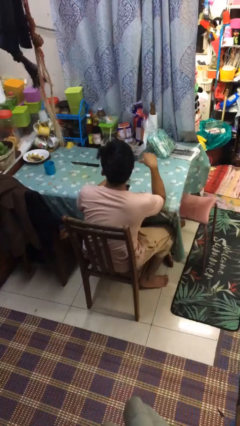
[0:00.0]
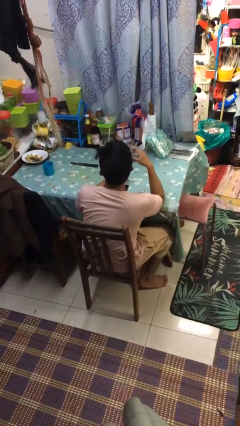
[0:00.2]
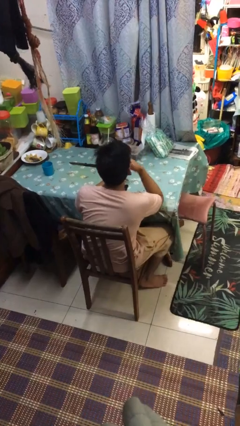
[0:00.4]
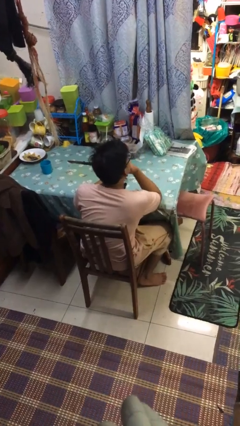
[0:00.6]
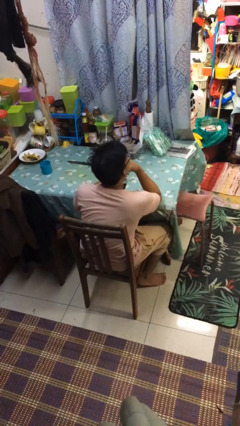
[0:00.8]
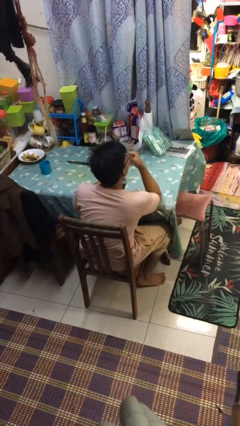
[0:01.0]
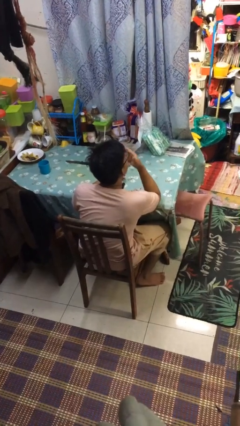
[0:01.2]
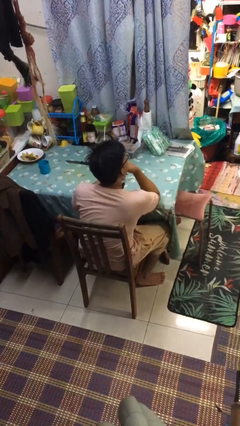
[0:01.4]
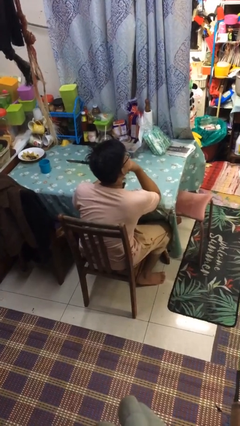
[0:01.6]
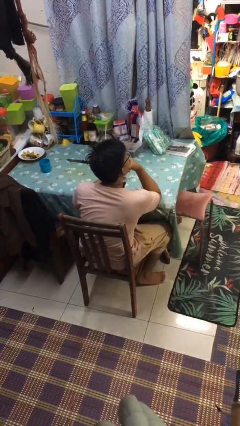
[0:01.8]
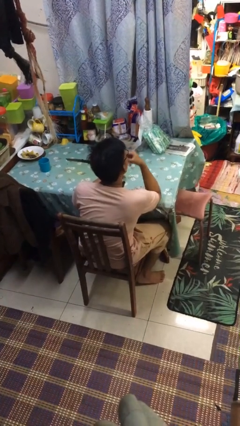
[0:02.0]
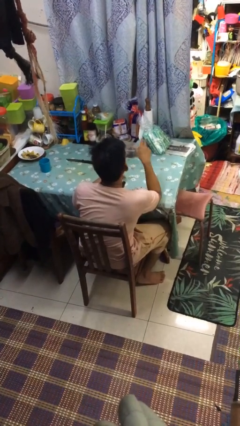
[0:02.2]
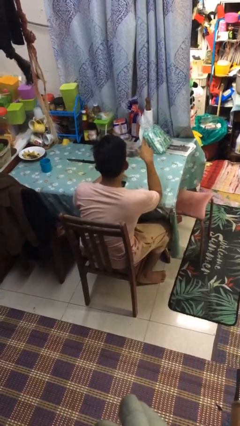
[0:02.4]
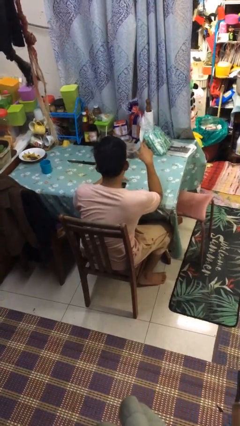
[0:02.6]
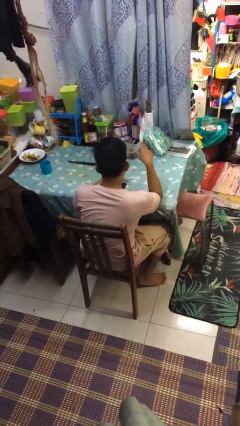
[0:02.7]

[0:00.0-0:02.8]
person strokes chin

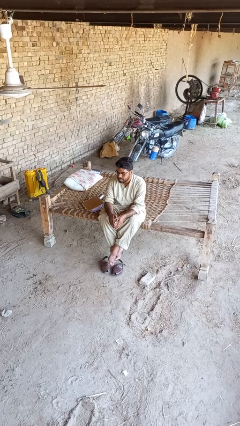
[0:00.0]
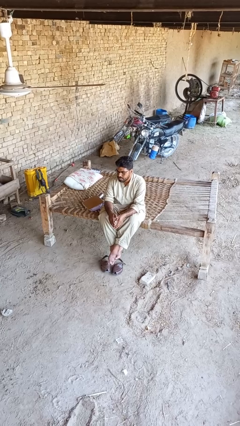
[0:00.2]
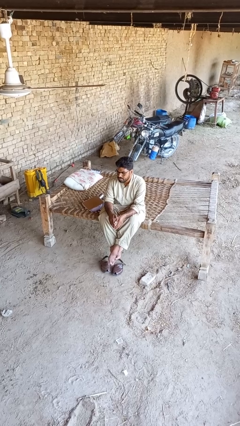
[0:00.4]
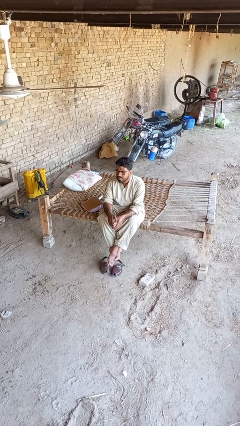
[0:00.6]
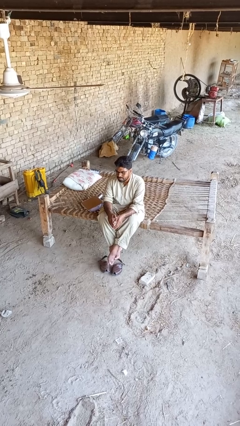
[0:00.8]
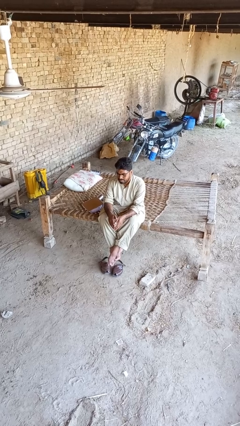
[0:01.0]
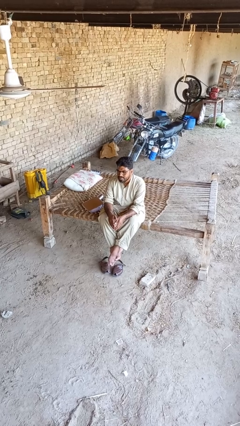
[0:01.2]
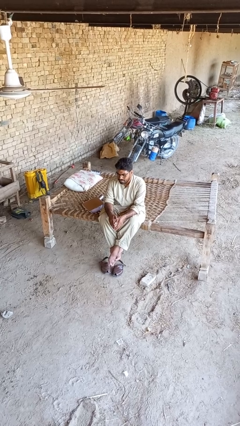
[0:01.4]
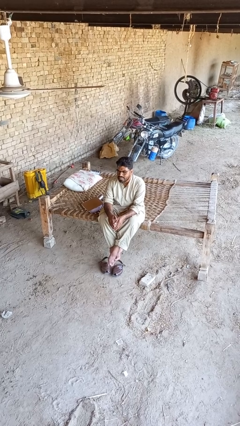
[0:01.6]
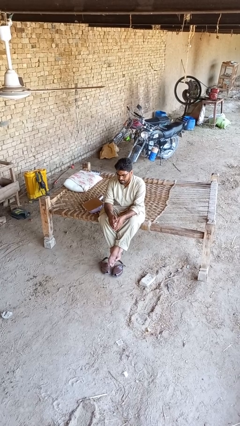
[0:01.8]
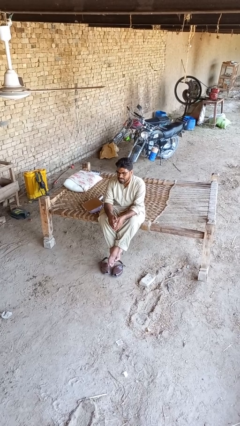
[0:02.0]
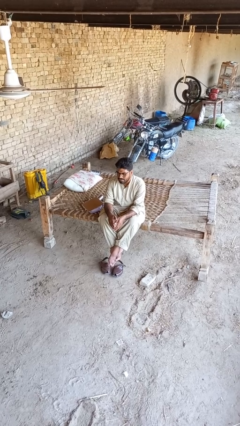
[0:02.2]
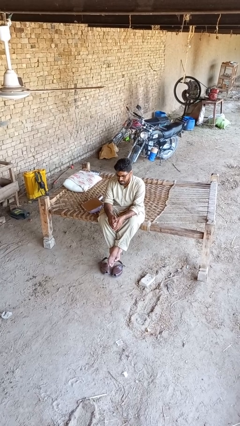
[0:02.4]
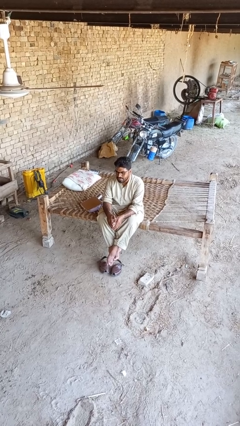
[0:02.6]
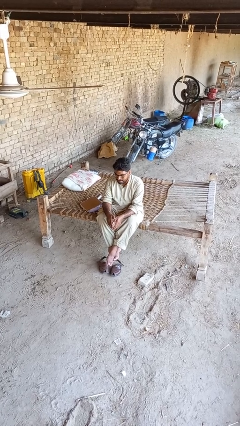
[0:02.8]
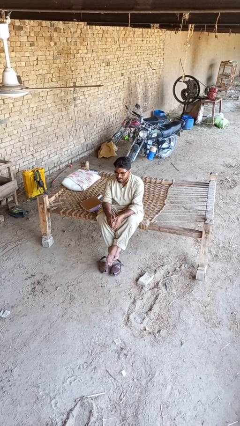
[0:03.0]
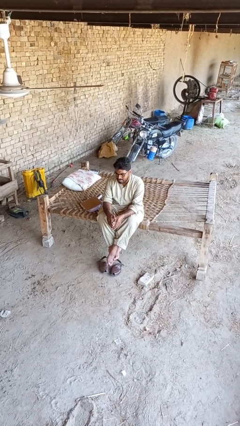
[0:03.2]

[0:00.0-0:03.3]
person nods head

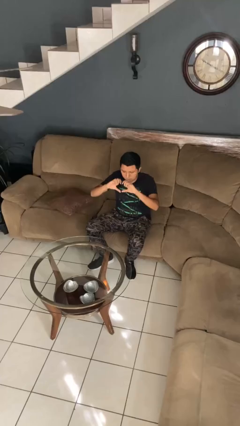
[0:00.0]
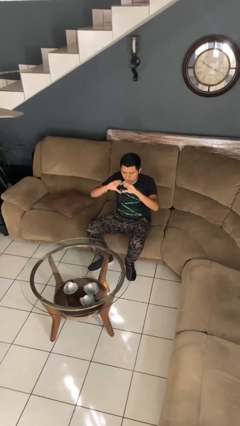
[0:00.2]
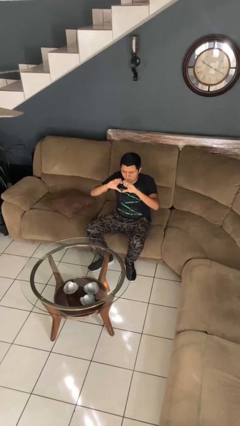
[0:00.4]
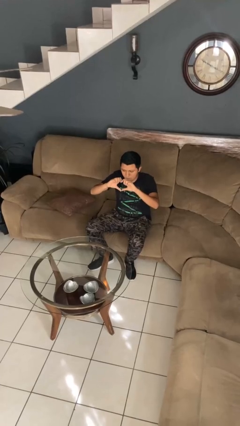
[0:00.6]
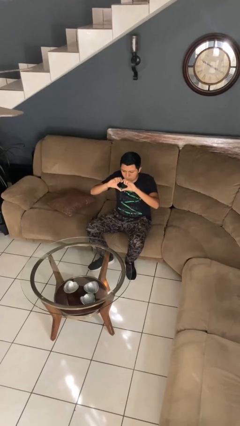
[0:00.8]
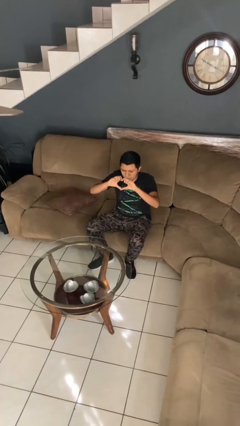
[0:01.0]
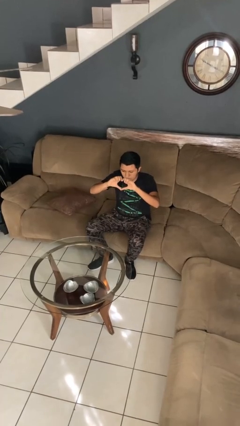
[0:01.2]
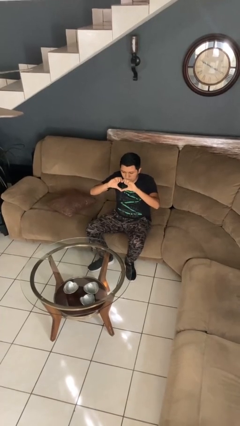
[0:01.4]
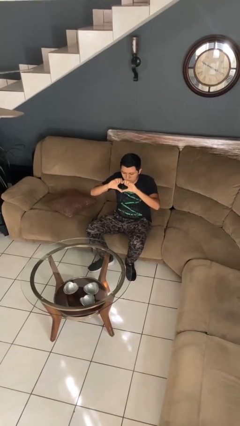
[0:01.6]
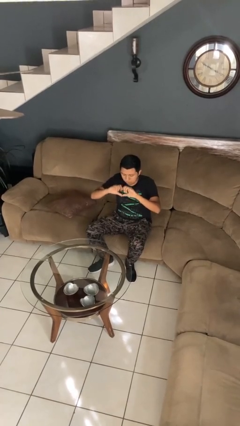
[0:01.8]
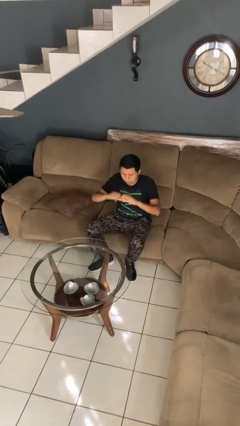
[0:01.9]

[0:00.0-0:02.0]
person gestures heart

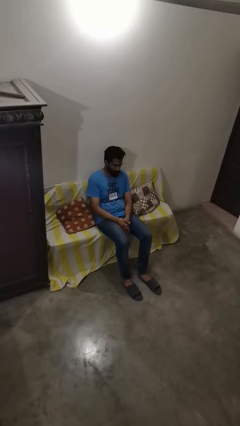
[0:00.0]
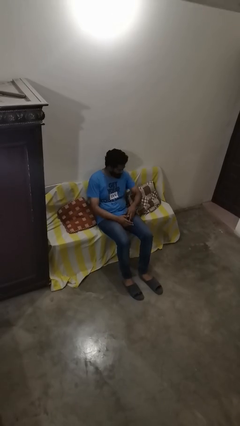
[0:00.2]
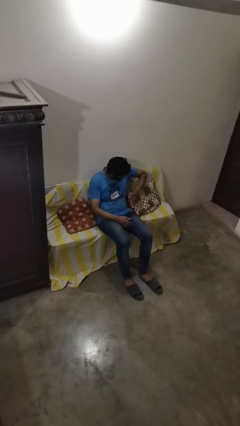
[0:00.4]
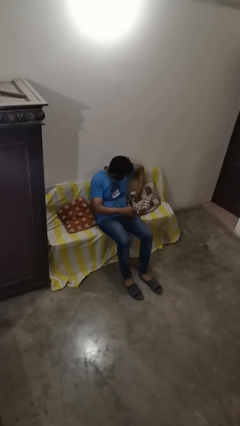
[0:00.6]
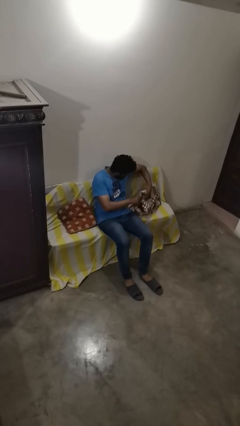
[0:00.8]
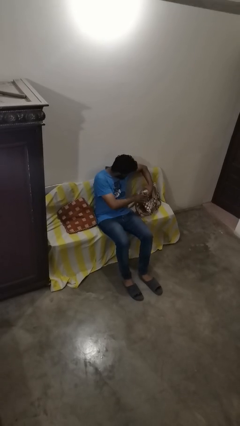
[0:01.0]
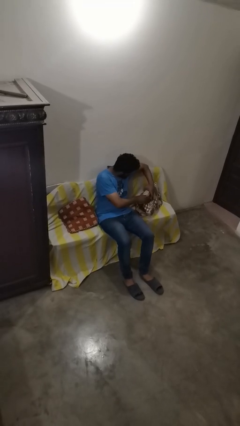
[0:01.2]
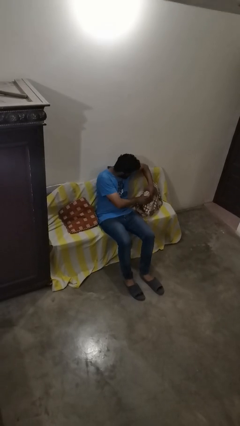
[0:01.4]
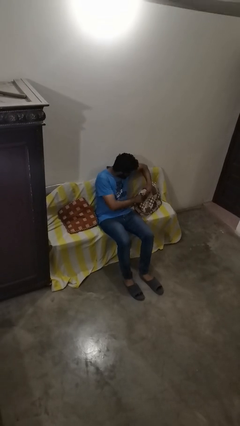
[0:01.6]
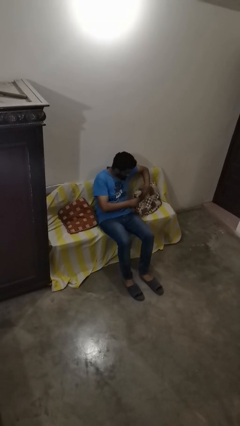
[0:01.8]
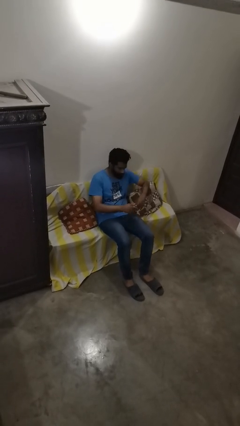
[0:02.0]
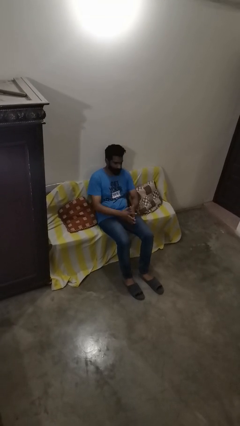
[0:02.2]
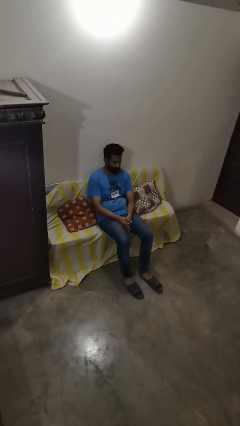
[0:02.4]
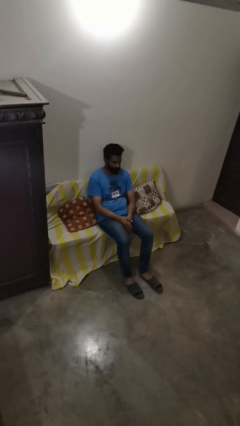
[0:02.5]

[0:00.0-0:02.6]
person searches in couch

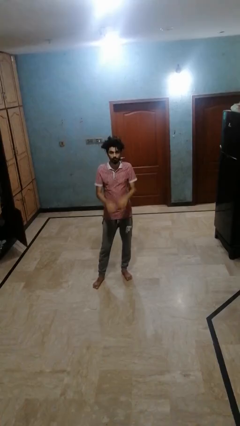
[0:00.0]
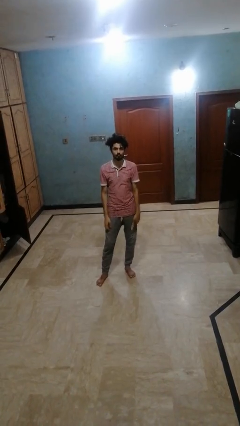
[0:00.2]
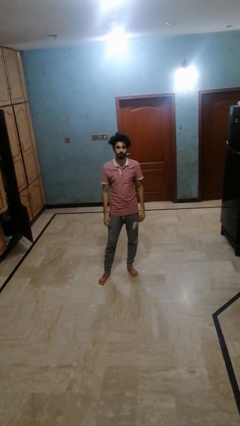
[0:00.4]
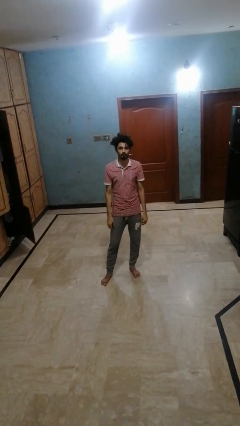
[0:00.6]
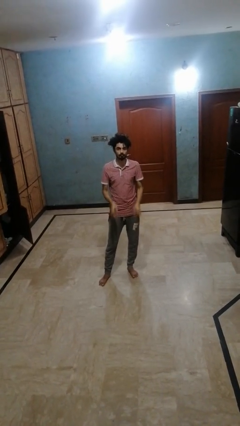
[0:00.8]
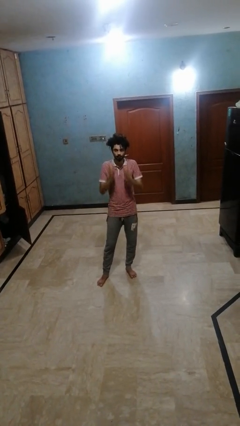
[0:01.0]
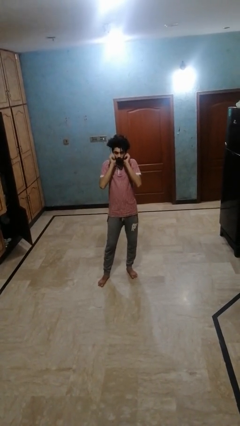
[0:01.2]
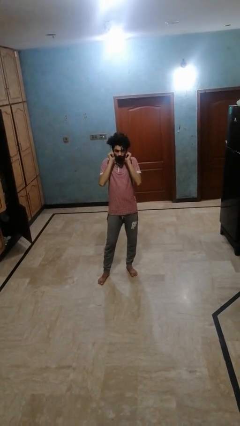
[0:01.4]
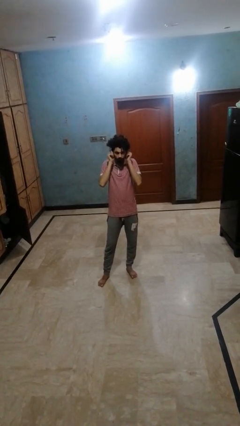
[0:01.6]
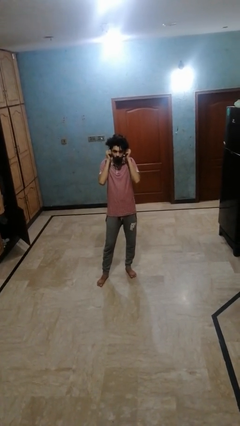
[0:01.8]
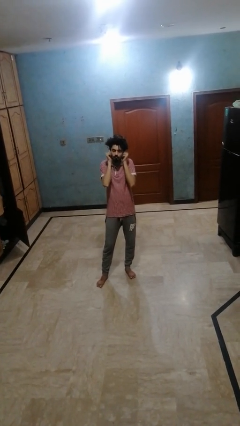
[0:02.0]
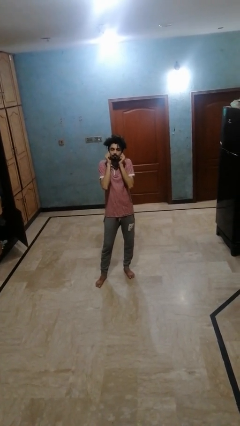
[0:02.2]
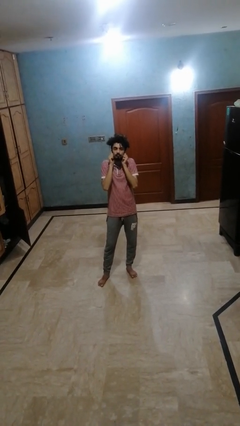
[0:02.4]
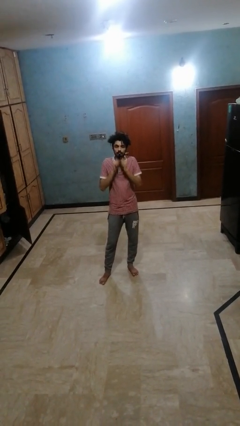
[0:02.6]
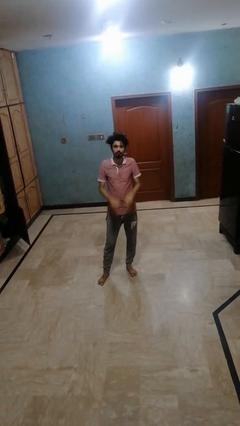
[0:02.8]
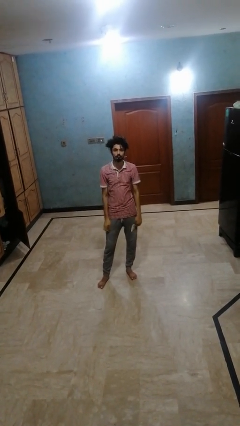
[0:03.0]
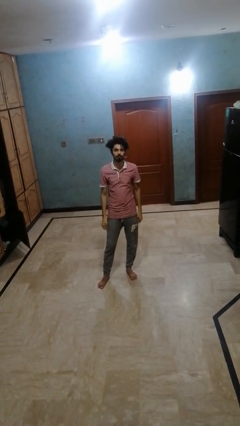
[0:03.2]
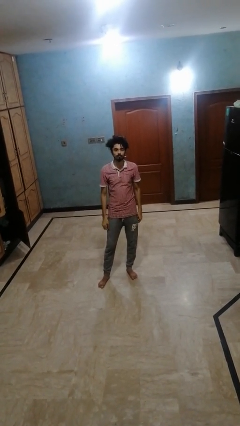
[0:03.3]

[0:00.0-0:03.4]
person touches earlobe

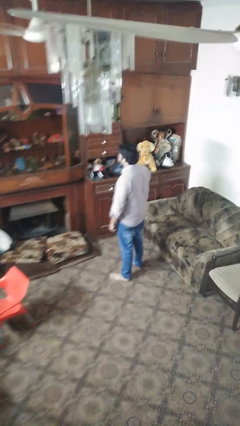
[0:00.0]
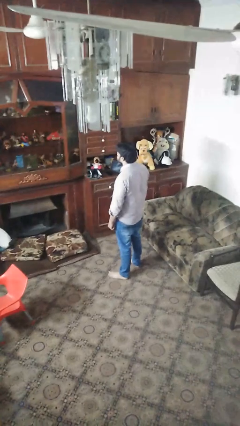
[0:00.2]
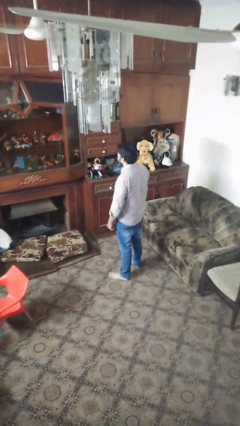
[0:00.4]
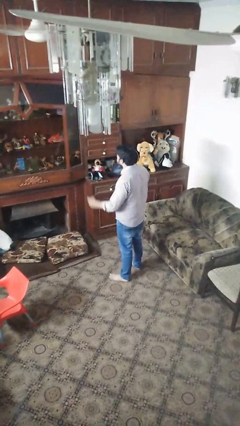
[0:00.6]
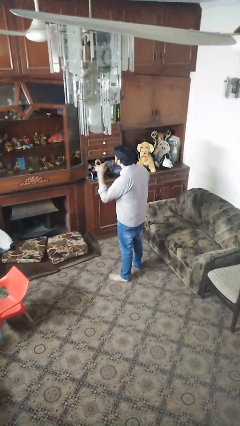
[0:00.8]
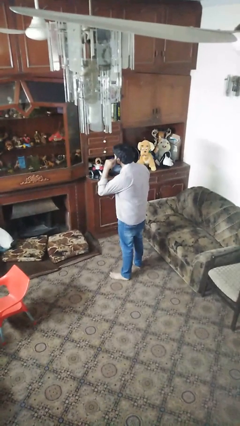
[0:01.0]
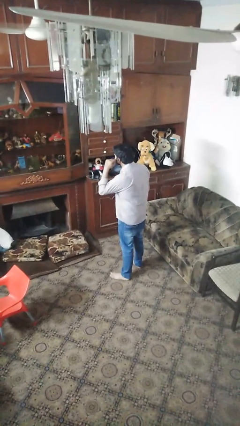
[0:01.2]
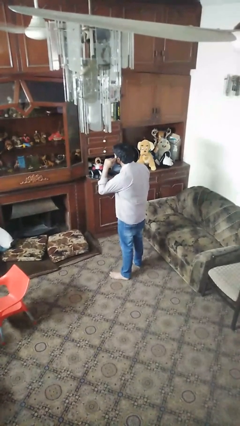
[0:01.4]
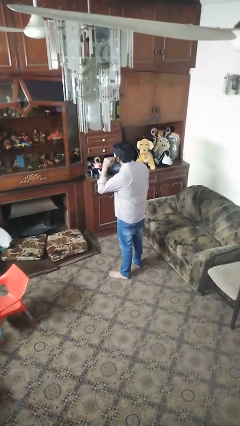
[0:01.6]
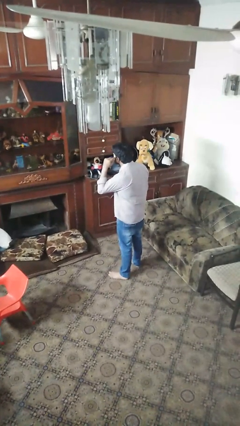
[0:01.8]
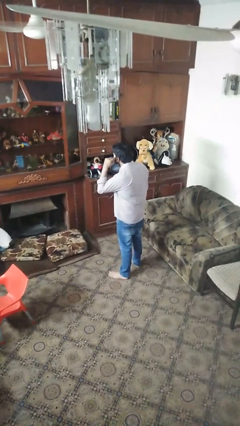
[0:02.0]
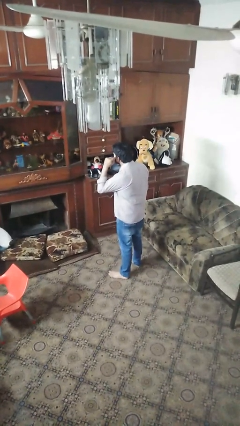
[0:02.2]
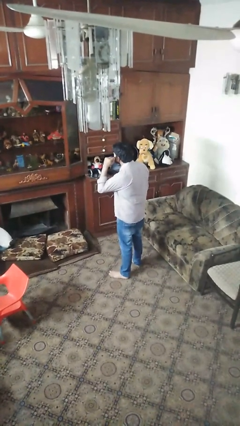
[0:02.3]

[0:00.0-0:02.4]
person gestures listen closely

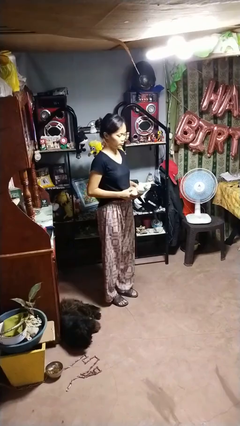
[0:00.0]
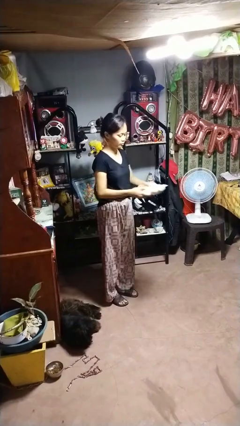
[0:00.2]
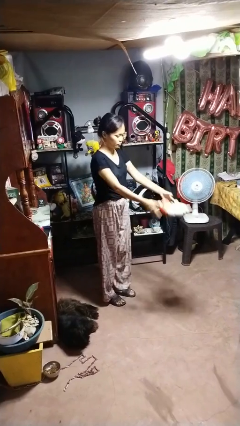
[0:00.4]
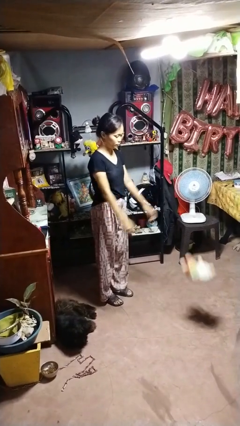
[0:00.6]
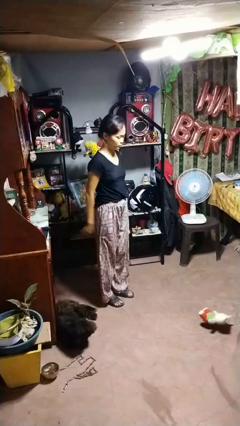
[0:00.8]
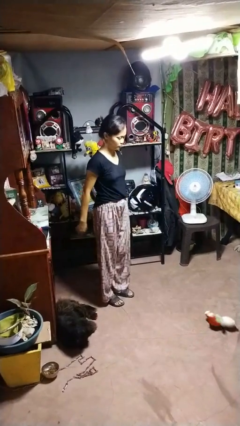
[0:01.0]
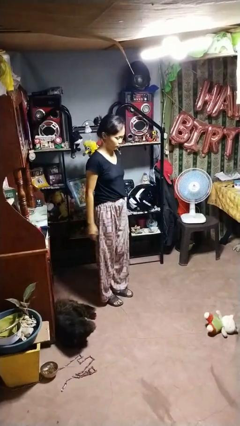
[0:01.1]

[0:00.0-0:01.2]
person throws object to ground
